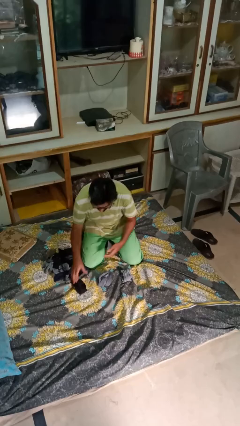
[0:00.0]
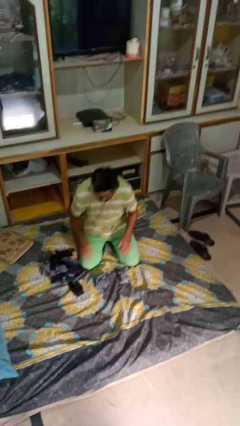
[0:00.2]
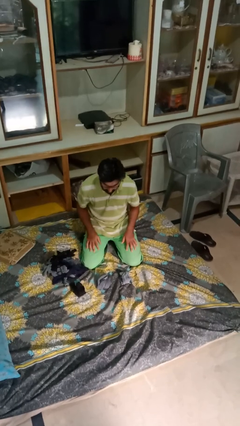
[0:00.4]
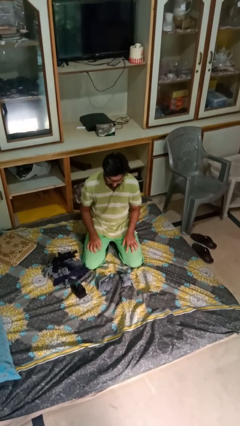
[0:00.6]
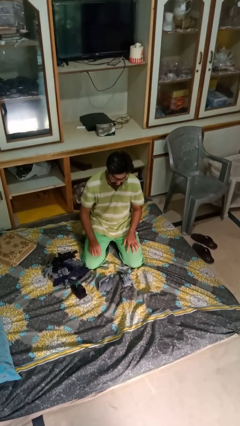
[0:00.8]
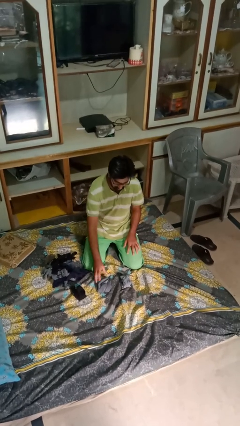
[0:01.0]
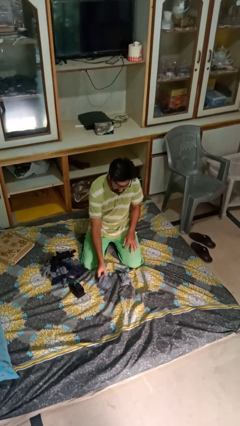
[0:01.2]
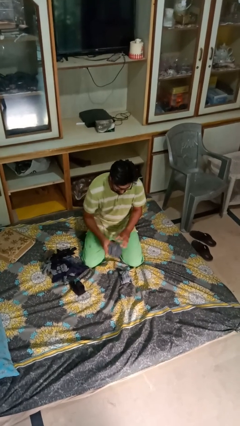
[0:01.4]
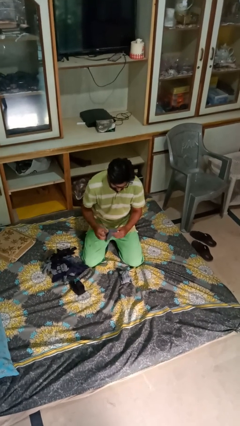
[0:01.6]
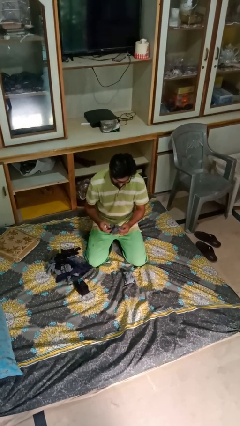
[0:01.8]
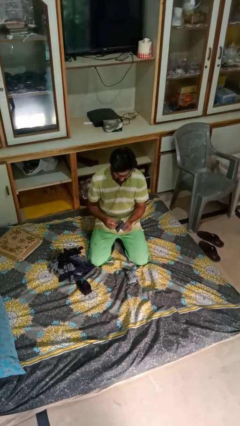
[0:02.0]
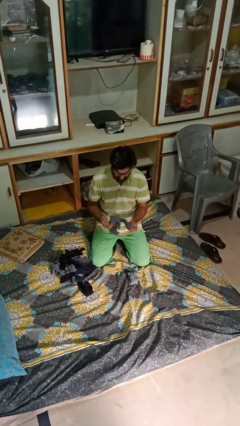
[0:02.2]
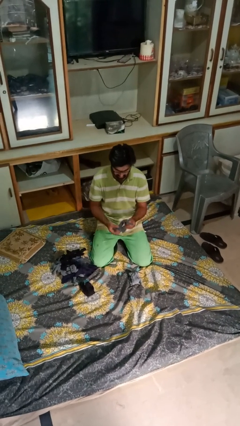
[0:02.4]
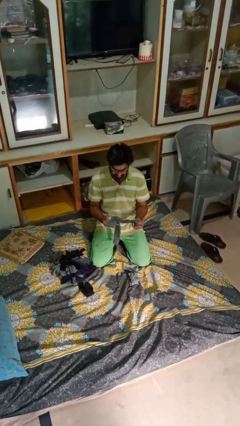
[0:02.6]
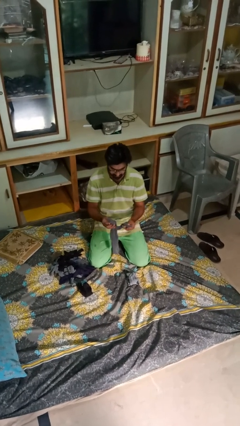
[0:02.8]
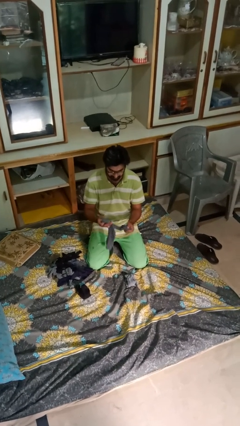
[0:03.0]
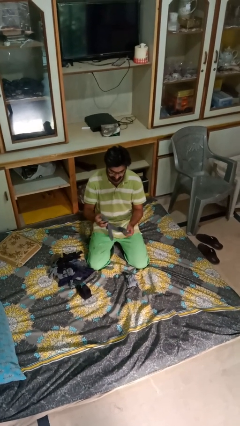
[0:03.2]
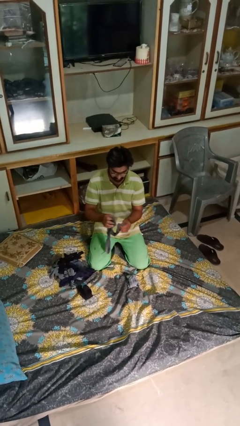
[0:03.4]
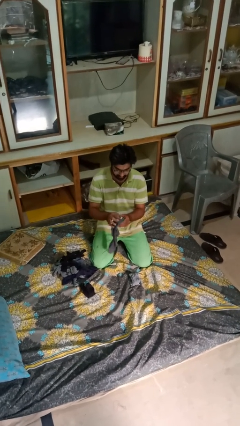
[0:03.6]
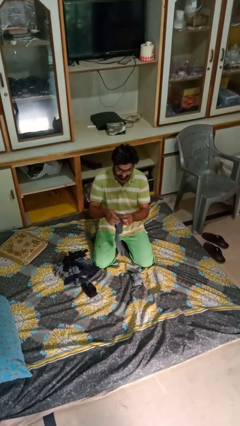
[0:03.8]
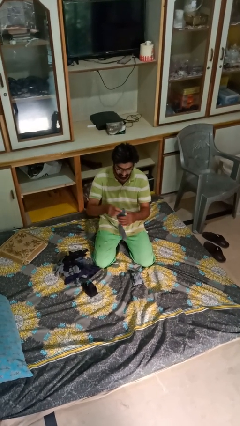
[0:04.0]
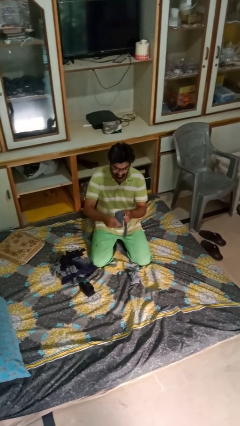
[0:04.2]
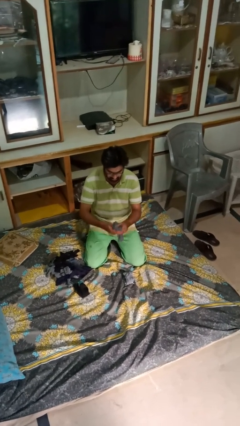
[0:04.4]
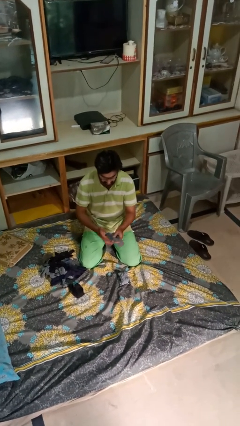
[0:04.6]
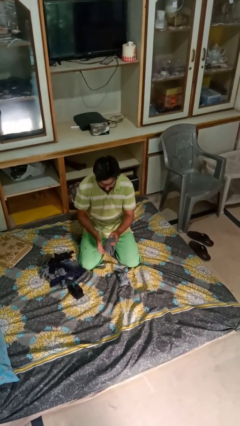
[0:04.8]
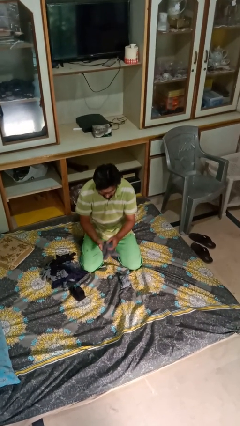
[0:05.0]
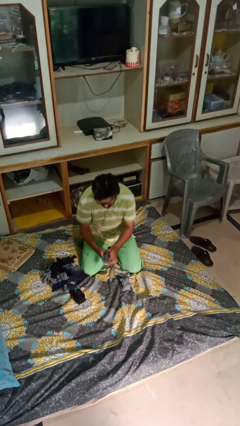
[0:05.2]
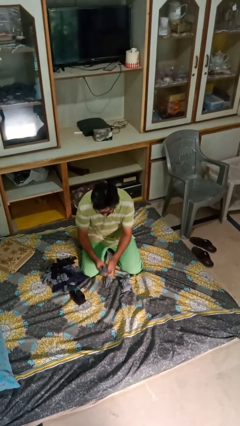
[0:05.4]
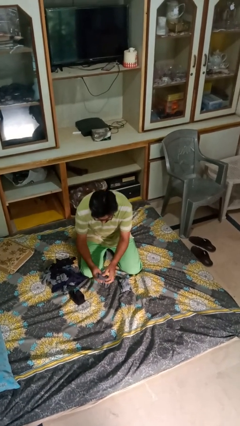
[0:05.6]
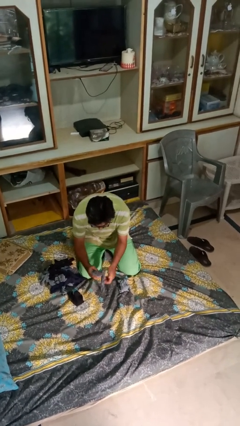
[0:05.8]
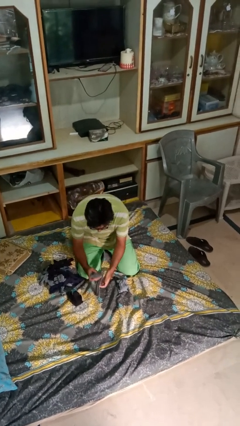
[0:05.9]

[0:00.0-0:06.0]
person folds socks

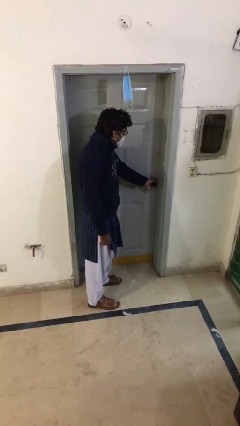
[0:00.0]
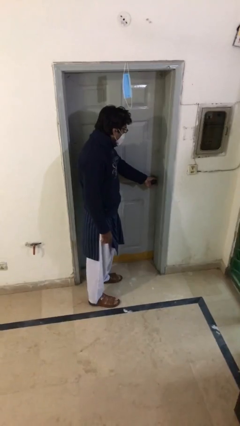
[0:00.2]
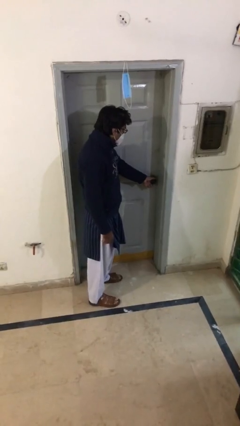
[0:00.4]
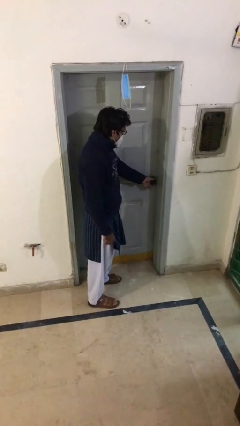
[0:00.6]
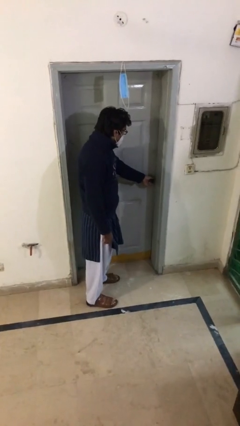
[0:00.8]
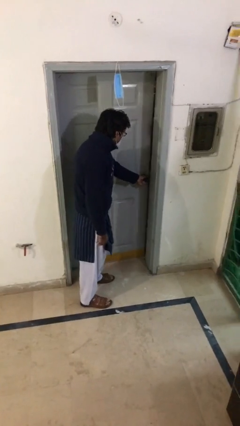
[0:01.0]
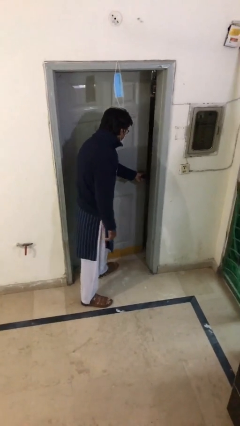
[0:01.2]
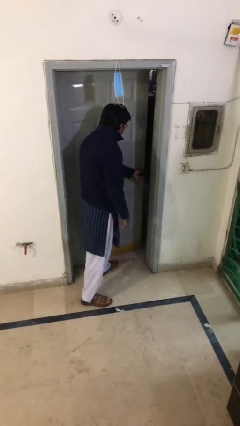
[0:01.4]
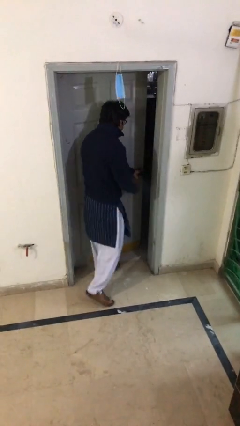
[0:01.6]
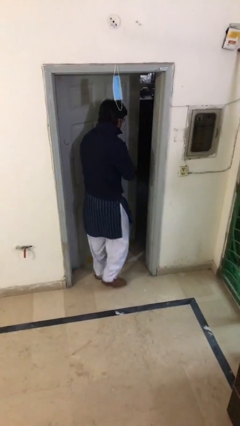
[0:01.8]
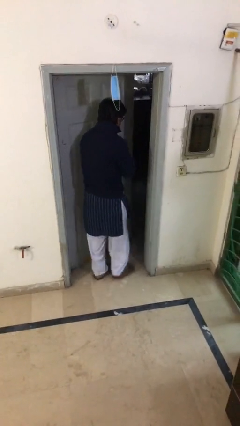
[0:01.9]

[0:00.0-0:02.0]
person opens facility door

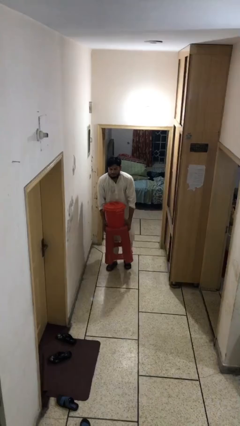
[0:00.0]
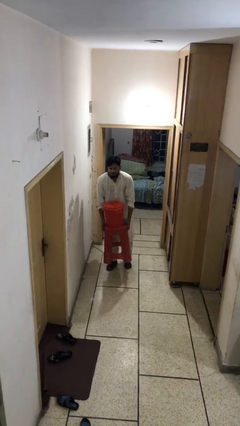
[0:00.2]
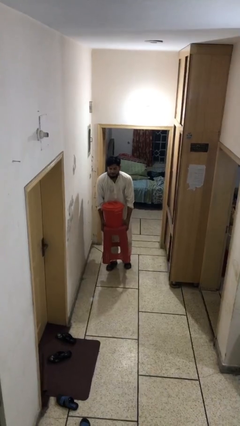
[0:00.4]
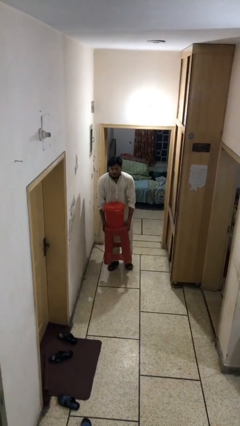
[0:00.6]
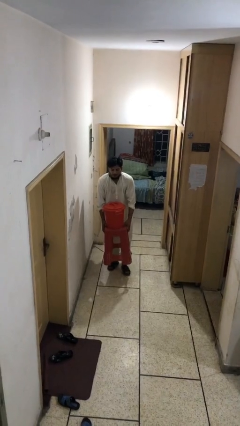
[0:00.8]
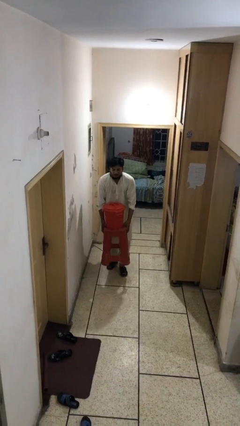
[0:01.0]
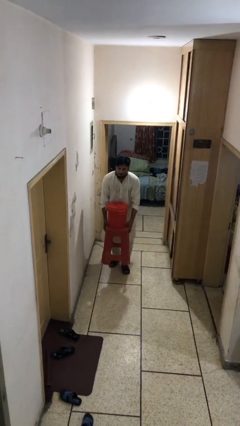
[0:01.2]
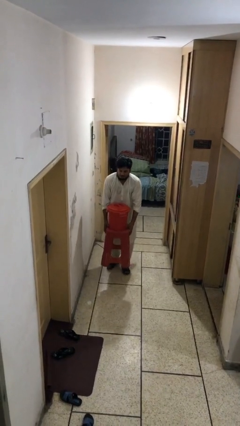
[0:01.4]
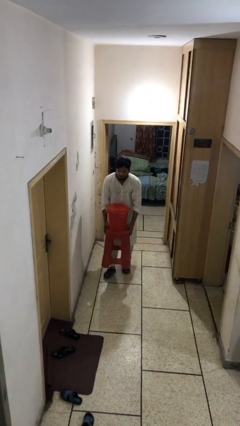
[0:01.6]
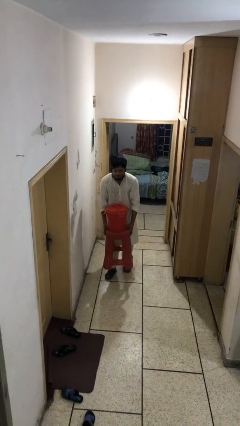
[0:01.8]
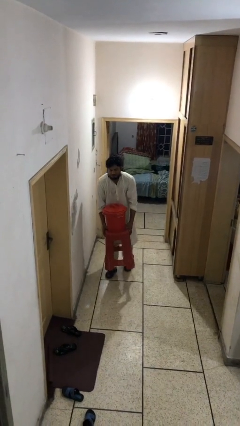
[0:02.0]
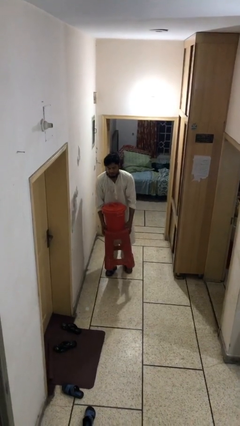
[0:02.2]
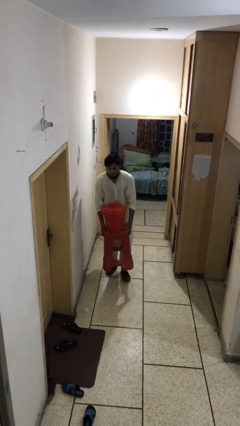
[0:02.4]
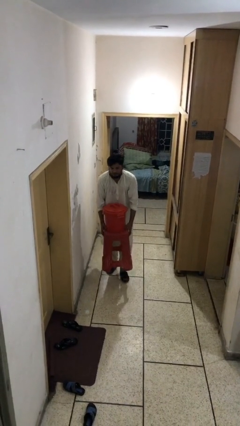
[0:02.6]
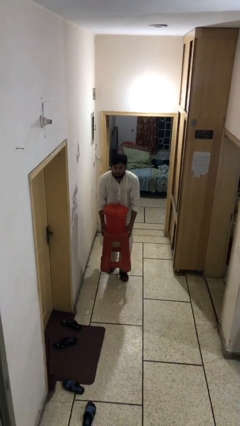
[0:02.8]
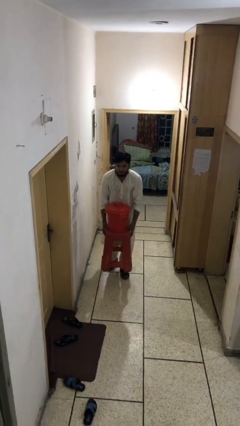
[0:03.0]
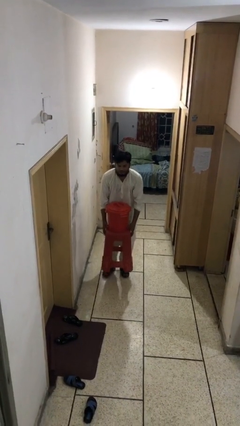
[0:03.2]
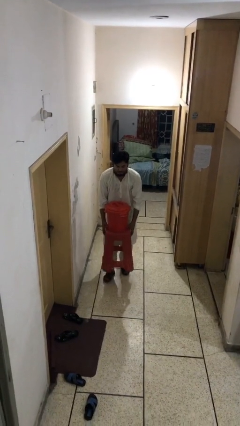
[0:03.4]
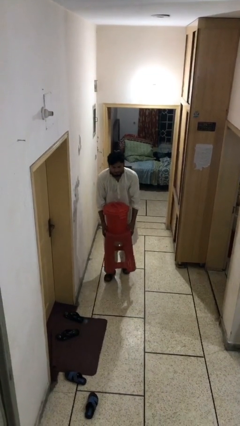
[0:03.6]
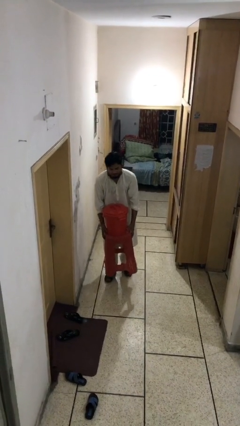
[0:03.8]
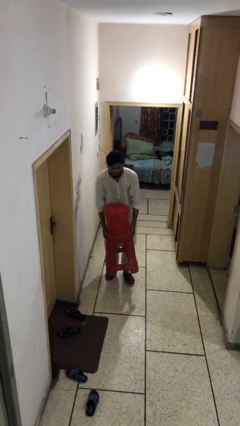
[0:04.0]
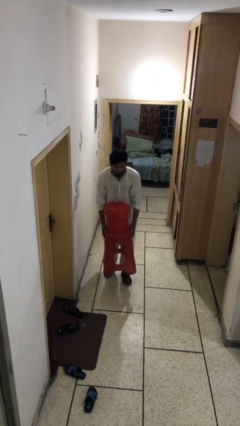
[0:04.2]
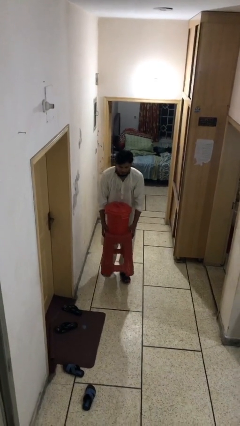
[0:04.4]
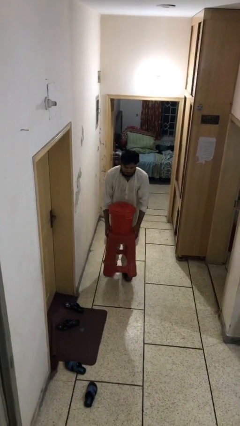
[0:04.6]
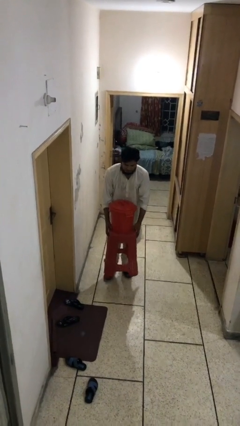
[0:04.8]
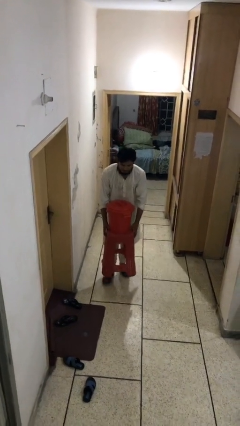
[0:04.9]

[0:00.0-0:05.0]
person carries heavy object

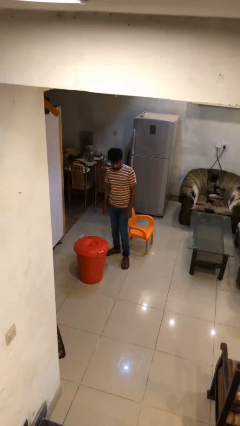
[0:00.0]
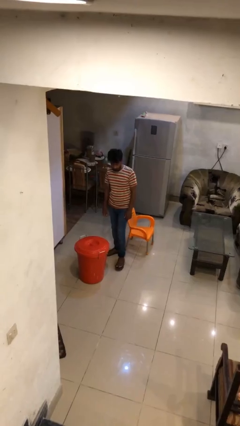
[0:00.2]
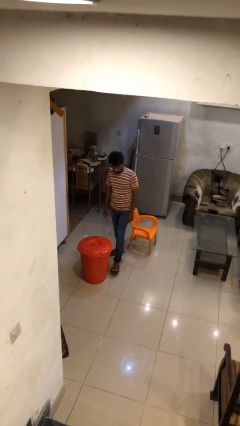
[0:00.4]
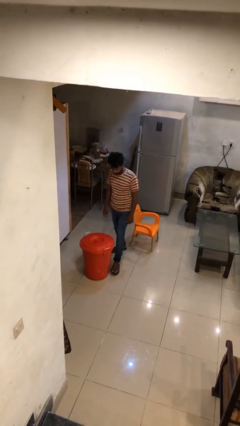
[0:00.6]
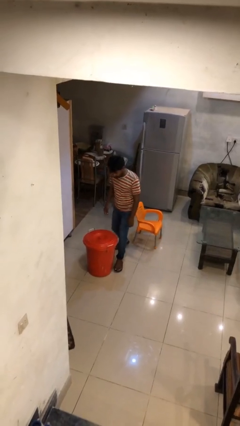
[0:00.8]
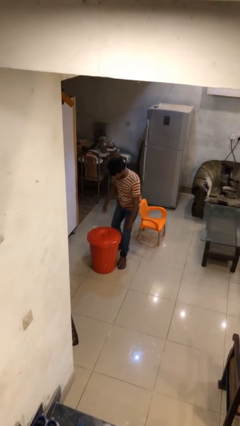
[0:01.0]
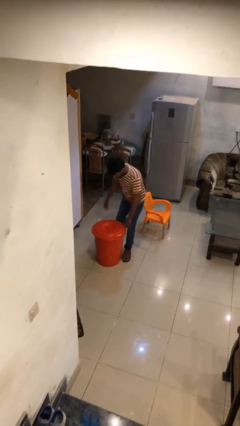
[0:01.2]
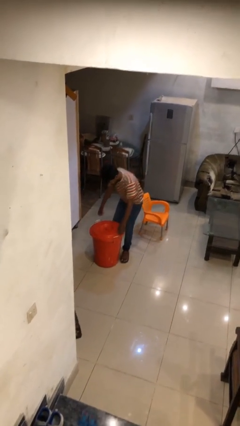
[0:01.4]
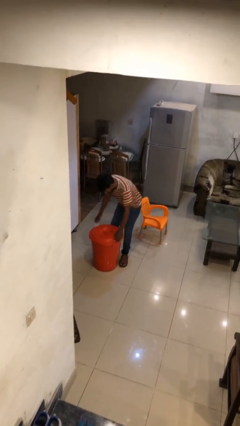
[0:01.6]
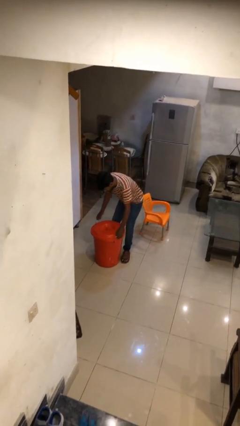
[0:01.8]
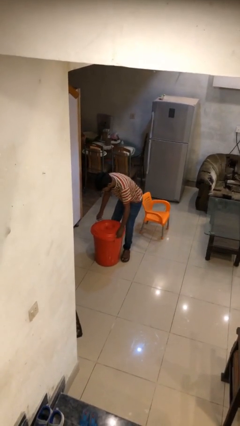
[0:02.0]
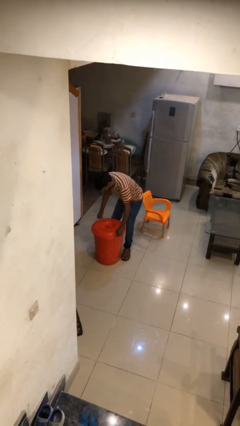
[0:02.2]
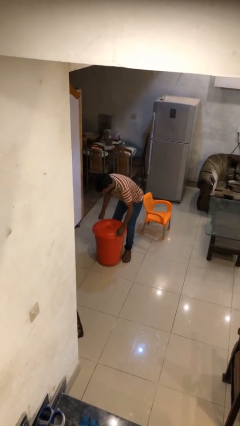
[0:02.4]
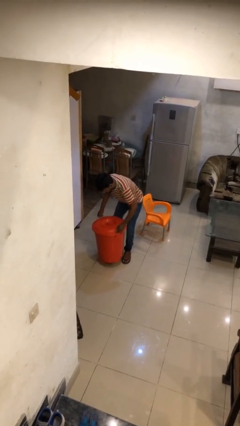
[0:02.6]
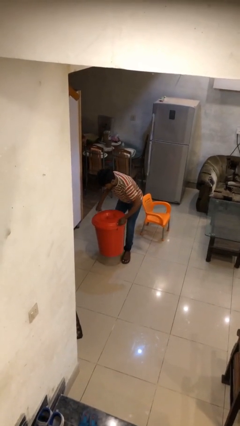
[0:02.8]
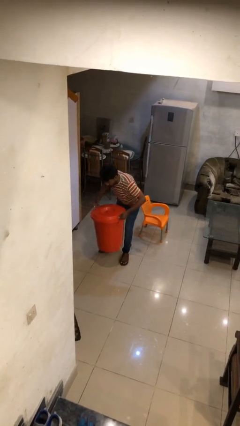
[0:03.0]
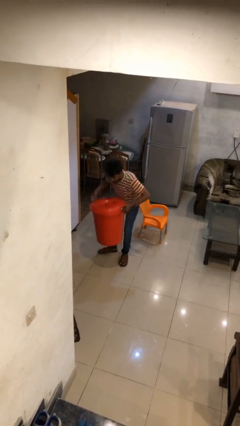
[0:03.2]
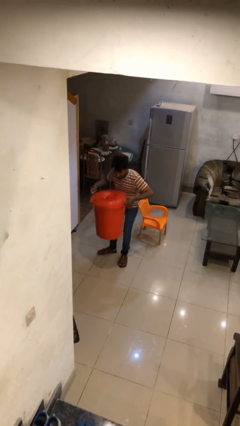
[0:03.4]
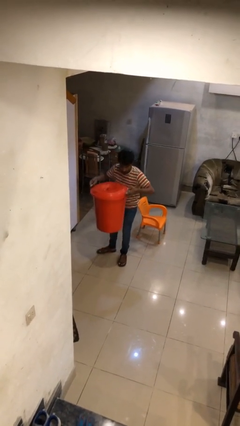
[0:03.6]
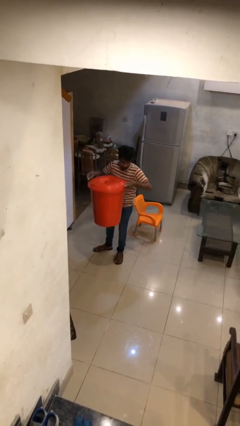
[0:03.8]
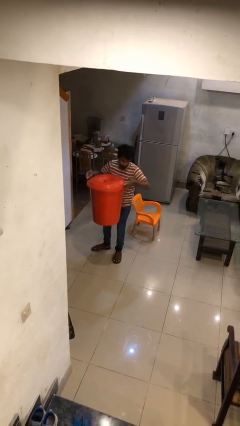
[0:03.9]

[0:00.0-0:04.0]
person picks up object from floor

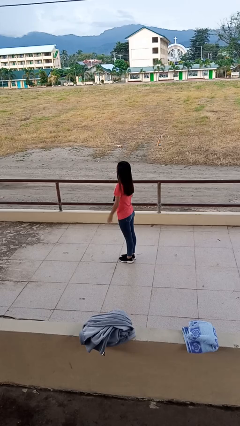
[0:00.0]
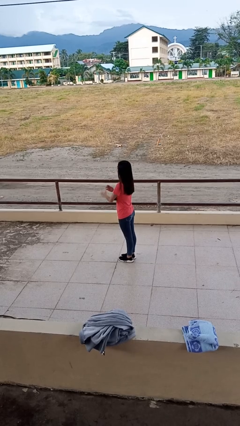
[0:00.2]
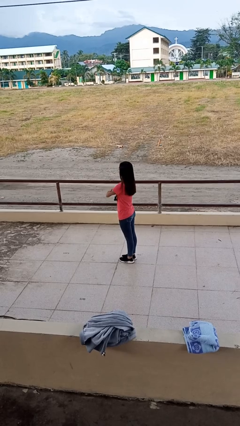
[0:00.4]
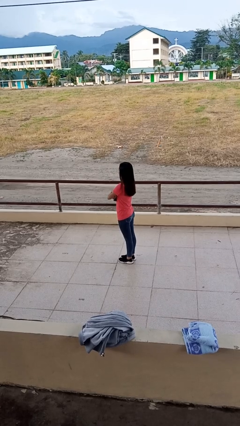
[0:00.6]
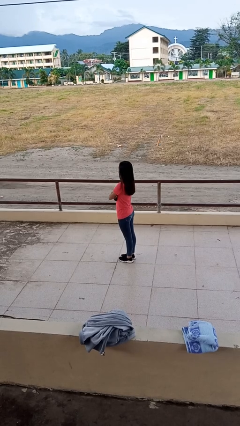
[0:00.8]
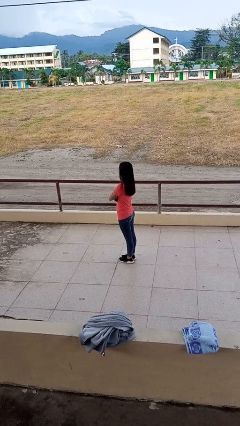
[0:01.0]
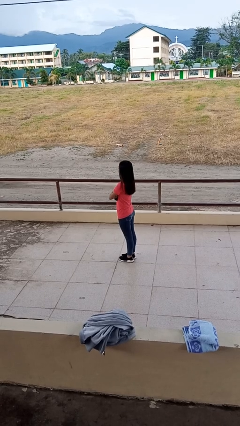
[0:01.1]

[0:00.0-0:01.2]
person crosses arms
